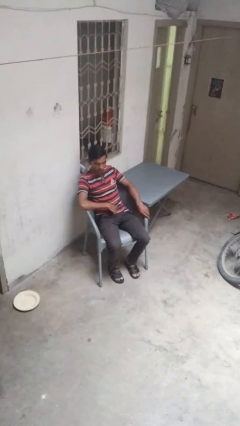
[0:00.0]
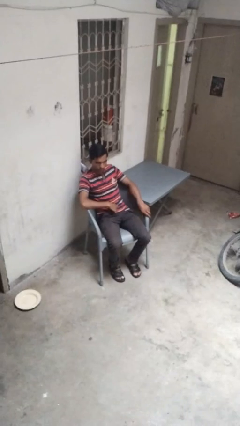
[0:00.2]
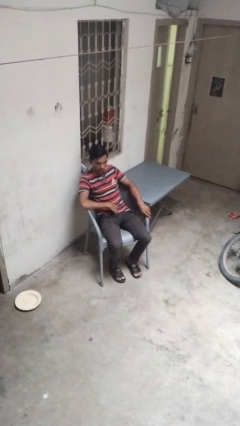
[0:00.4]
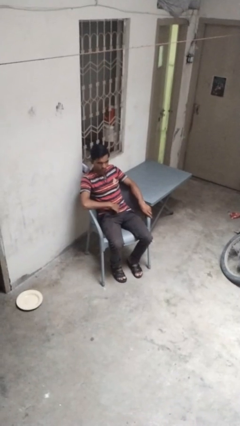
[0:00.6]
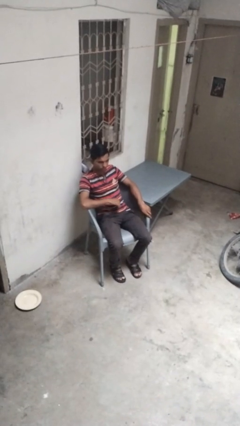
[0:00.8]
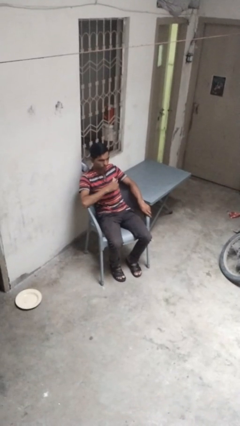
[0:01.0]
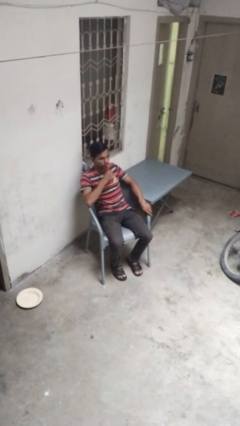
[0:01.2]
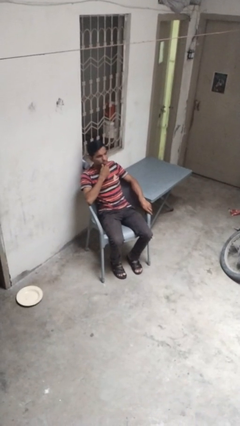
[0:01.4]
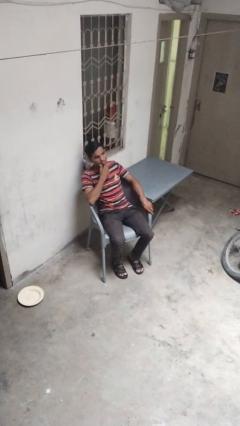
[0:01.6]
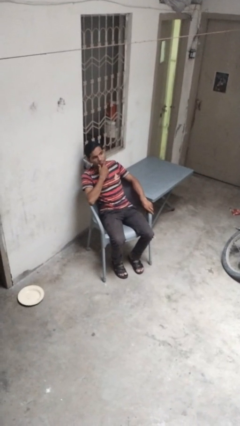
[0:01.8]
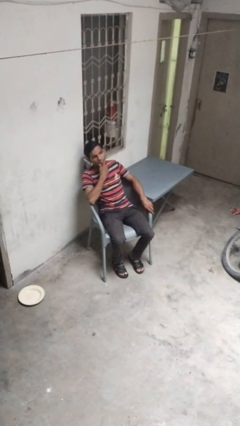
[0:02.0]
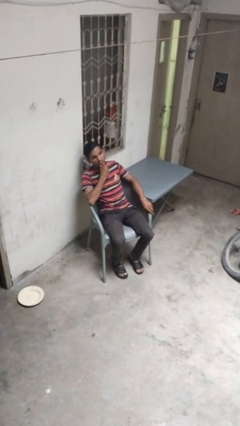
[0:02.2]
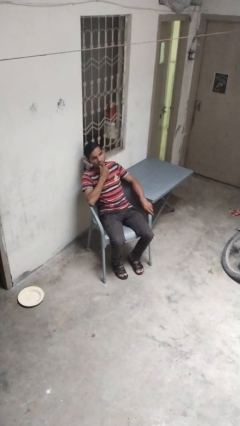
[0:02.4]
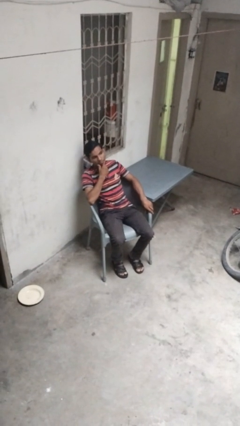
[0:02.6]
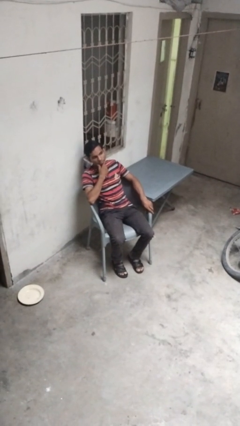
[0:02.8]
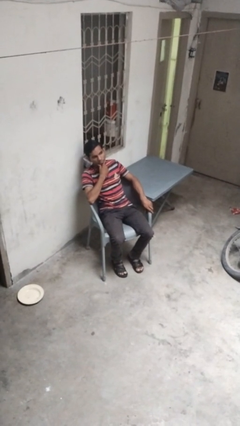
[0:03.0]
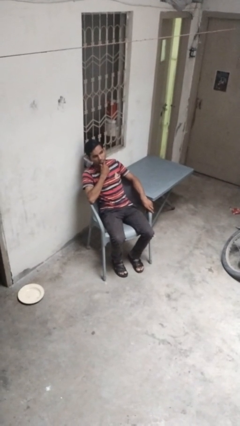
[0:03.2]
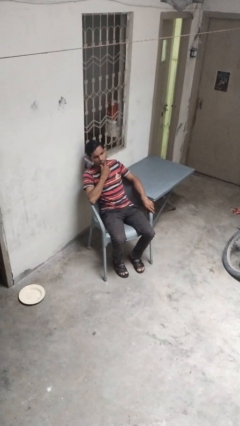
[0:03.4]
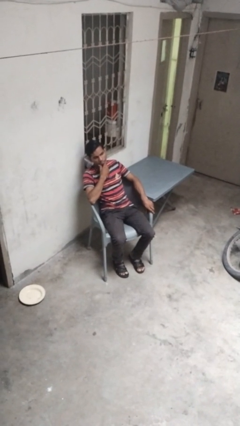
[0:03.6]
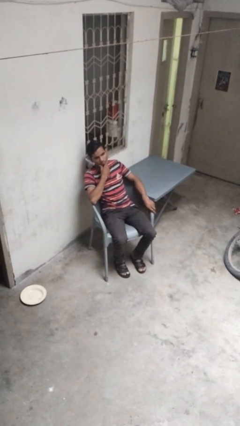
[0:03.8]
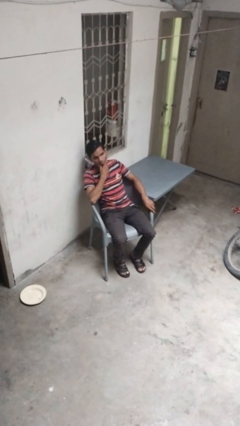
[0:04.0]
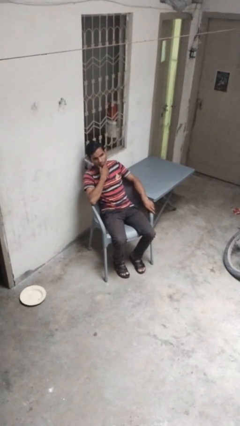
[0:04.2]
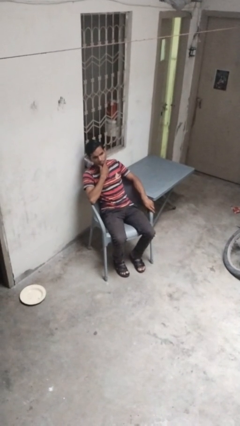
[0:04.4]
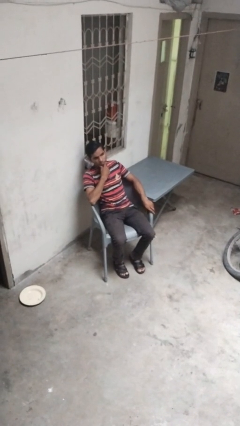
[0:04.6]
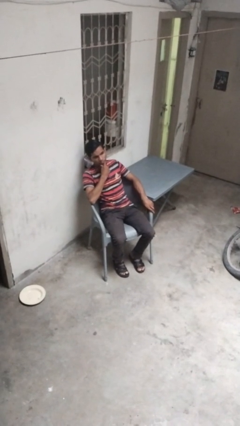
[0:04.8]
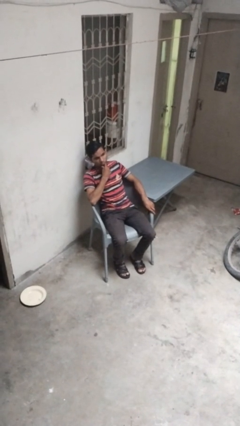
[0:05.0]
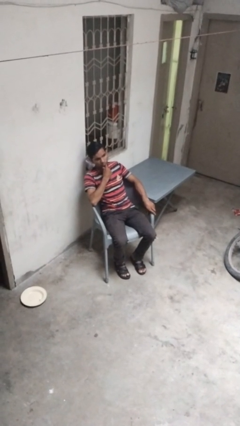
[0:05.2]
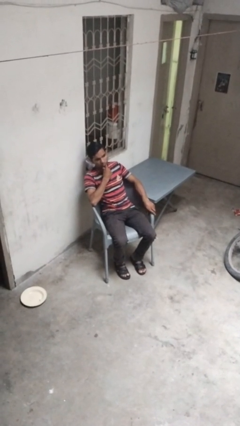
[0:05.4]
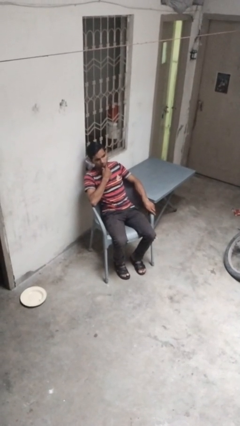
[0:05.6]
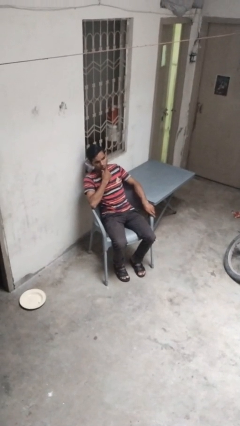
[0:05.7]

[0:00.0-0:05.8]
person strokes chin

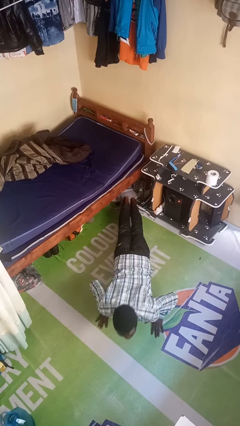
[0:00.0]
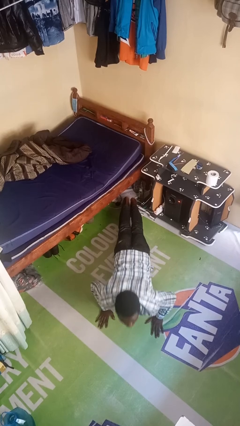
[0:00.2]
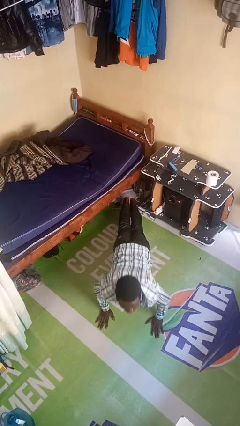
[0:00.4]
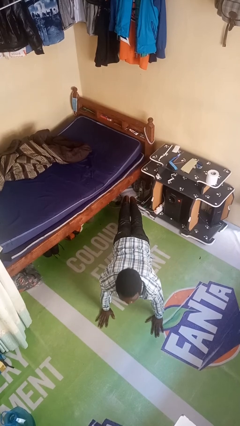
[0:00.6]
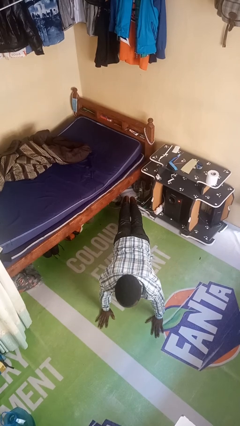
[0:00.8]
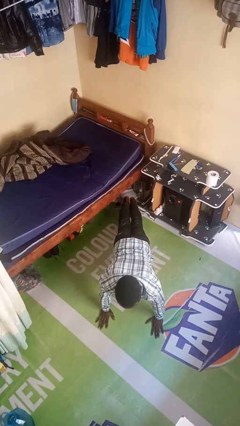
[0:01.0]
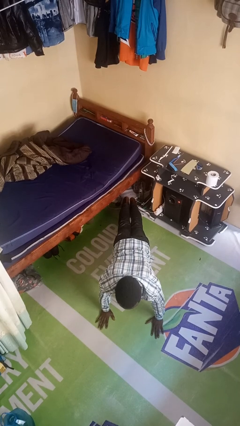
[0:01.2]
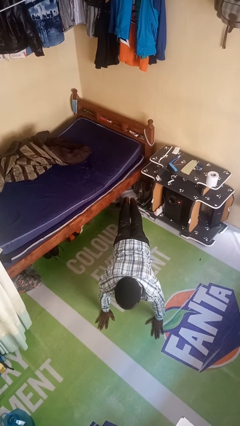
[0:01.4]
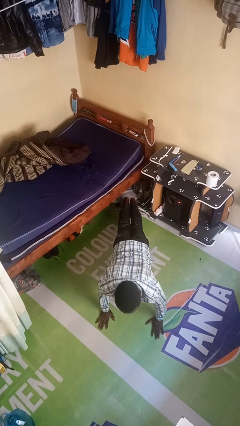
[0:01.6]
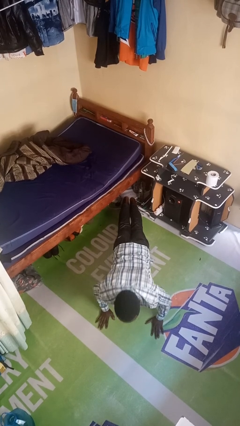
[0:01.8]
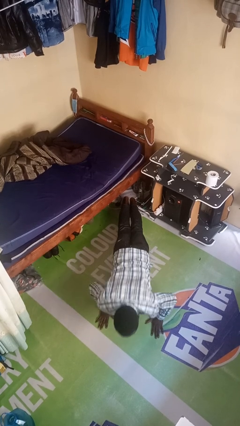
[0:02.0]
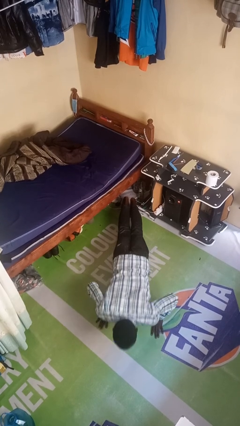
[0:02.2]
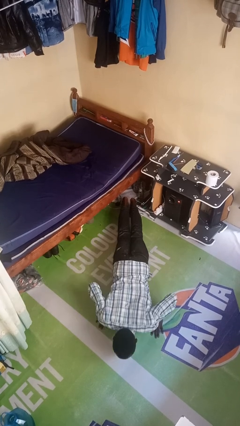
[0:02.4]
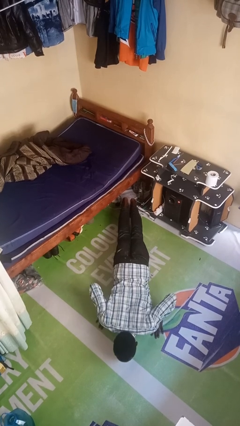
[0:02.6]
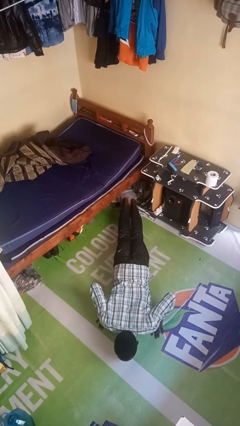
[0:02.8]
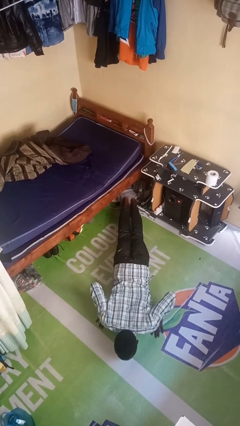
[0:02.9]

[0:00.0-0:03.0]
person exercises with pushup

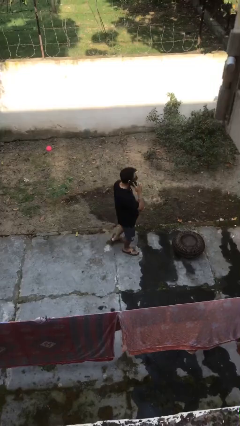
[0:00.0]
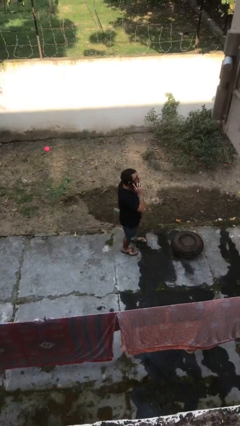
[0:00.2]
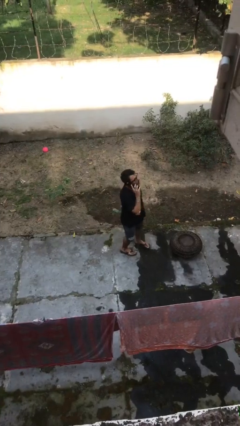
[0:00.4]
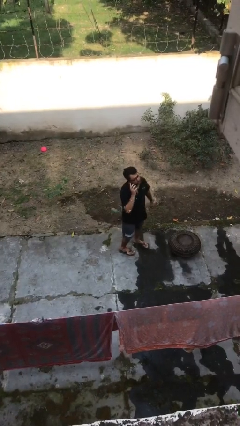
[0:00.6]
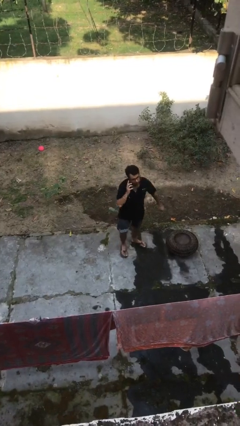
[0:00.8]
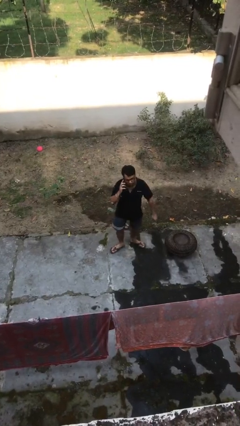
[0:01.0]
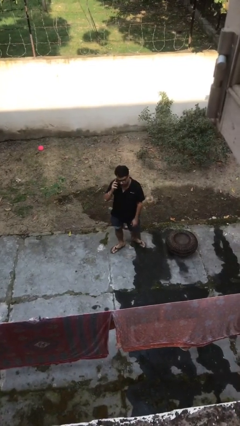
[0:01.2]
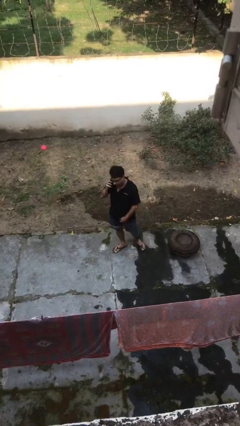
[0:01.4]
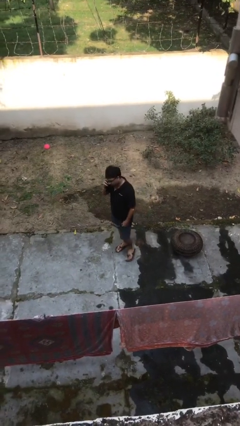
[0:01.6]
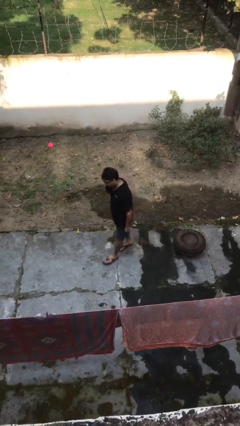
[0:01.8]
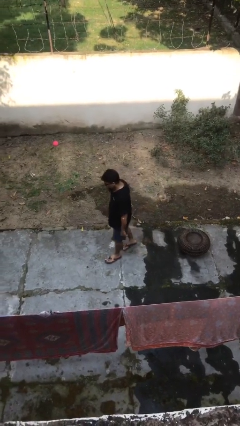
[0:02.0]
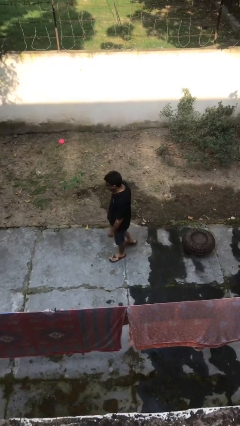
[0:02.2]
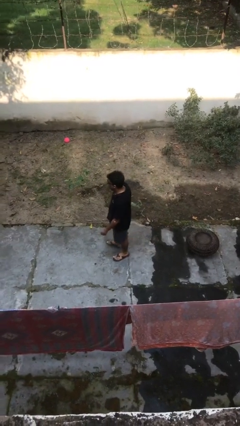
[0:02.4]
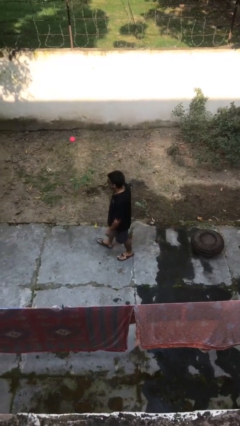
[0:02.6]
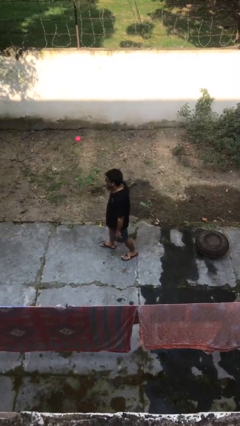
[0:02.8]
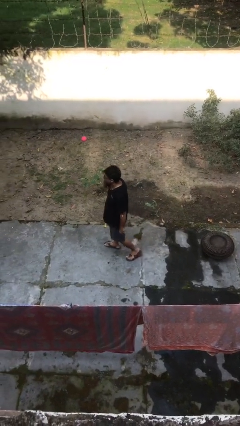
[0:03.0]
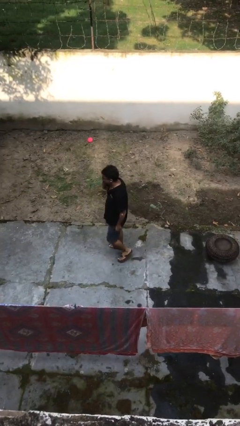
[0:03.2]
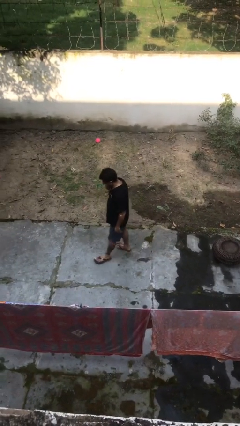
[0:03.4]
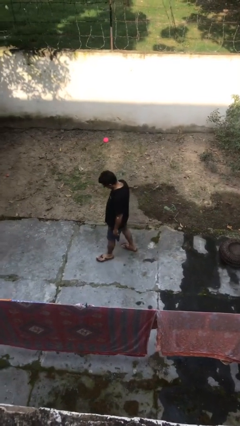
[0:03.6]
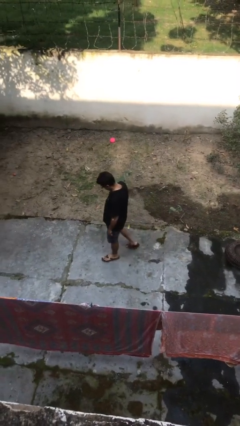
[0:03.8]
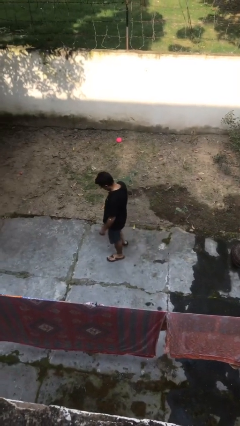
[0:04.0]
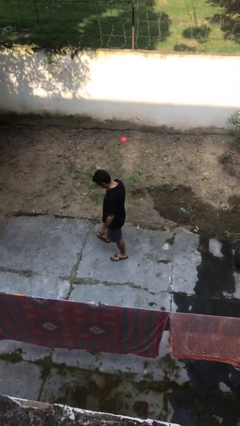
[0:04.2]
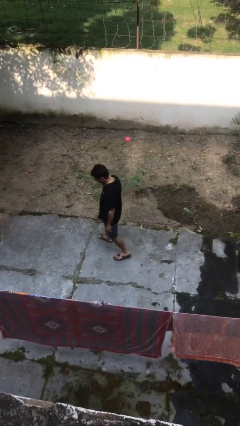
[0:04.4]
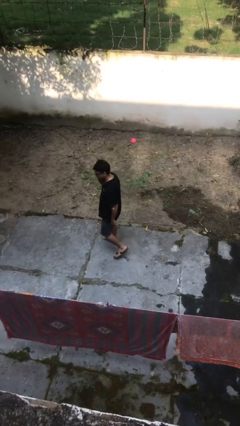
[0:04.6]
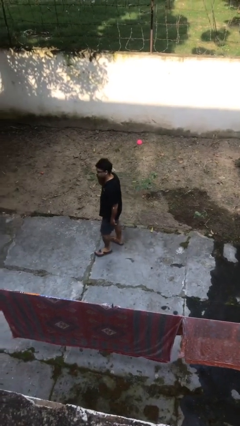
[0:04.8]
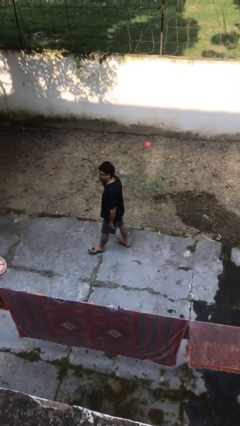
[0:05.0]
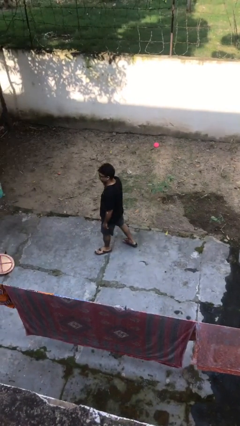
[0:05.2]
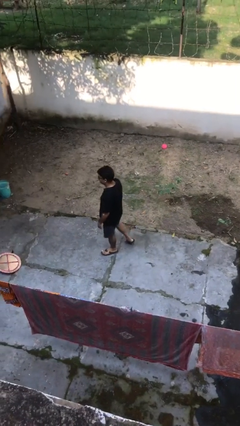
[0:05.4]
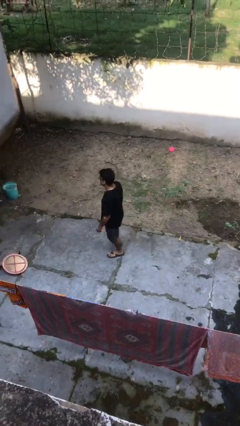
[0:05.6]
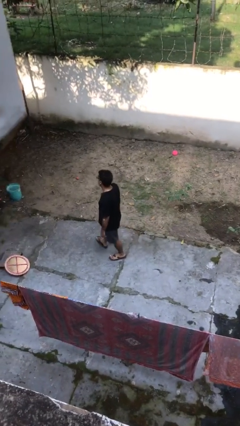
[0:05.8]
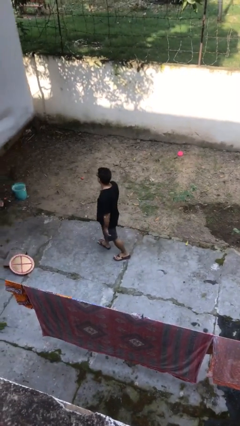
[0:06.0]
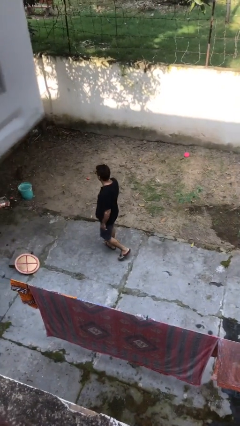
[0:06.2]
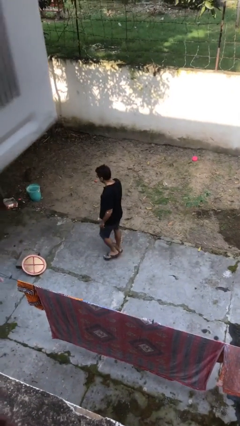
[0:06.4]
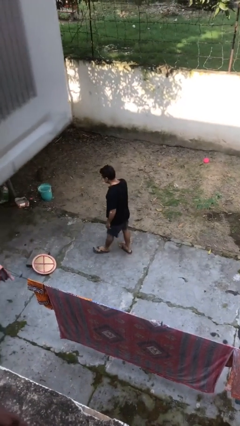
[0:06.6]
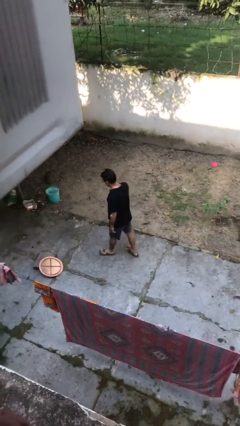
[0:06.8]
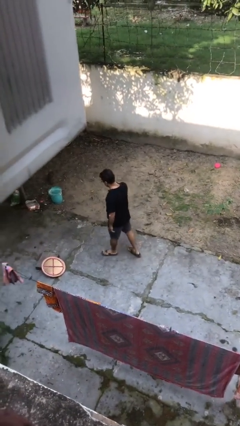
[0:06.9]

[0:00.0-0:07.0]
person talks on phone

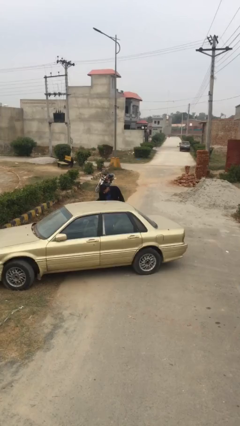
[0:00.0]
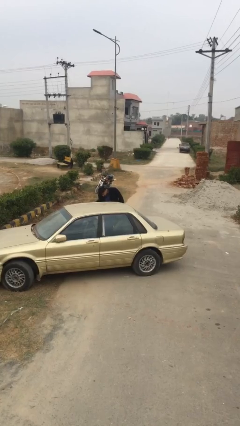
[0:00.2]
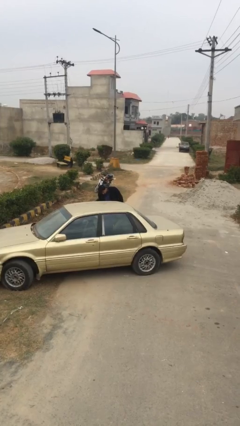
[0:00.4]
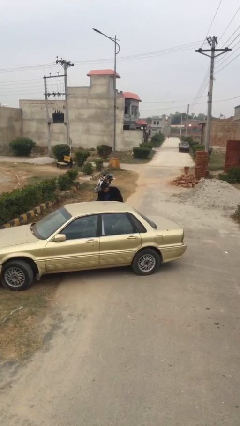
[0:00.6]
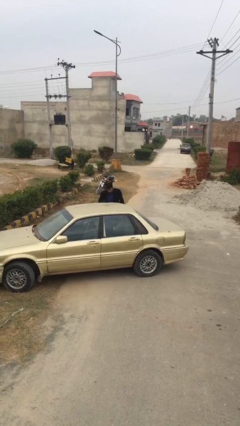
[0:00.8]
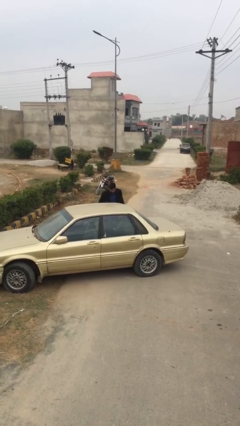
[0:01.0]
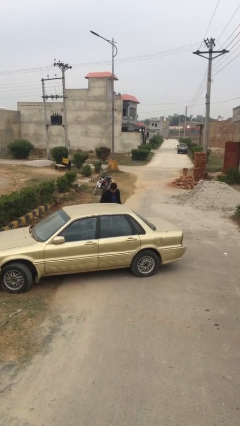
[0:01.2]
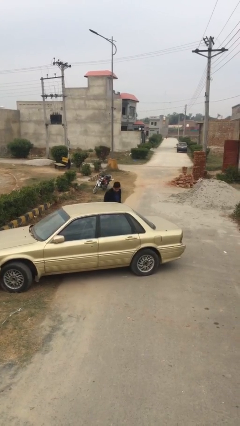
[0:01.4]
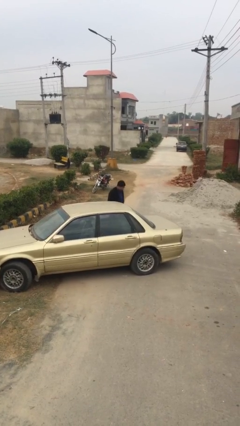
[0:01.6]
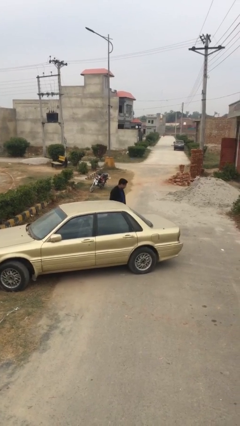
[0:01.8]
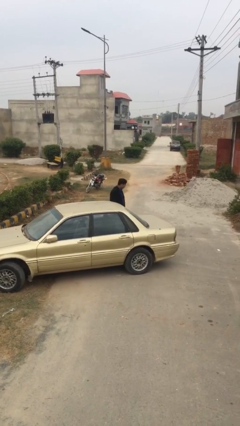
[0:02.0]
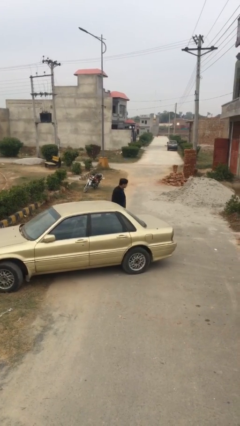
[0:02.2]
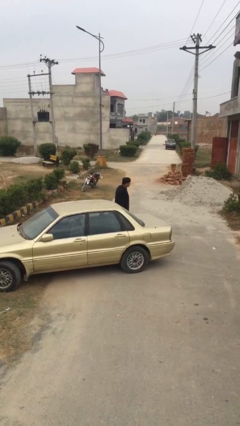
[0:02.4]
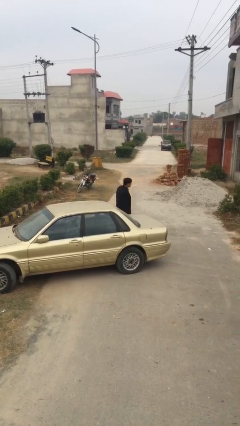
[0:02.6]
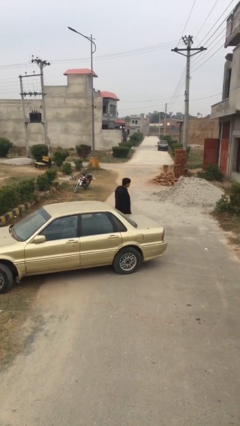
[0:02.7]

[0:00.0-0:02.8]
person closes car door
